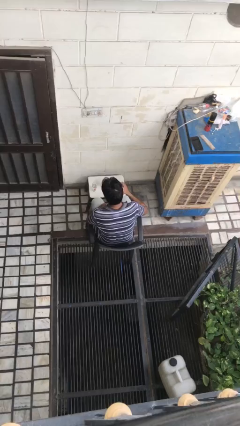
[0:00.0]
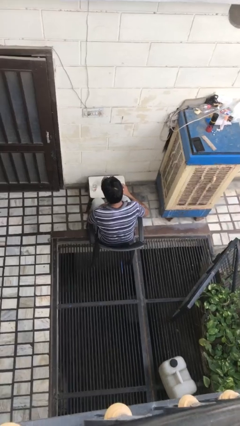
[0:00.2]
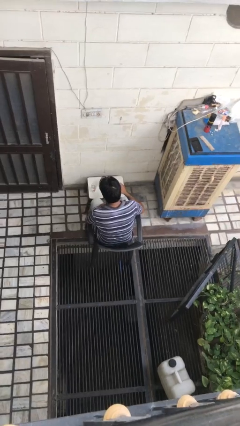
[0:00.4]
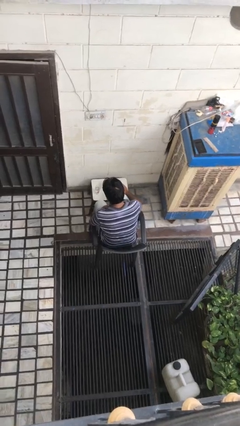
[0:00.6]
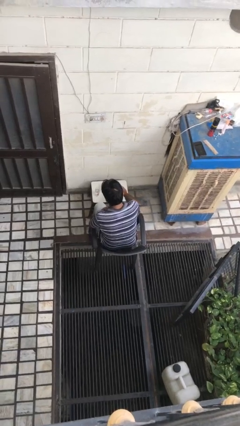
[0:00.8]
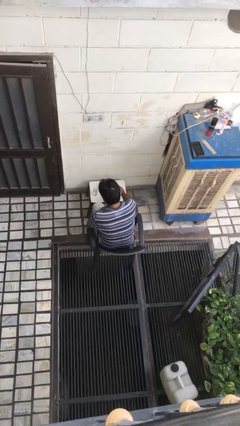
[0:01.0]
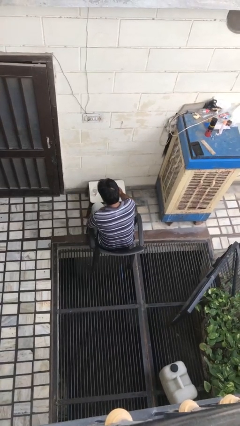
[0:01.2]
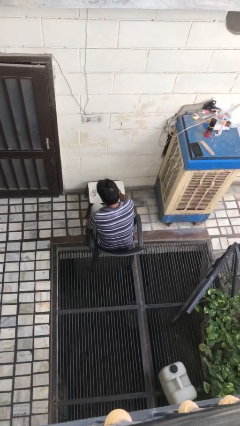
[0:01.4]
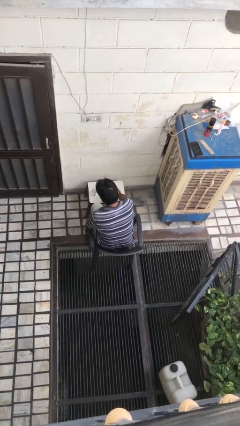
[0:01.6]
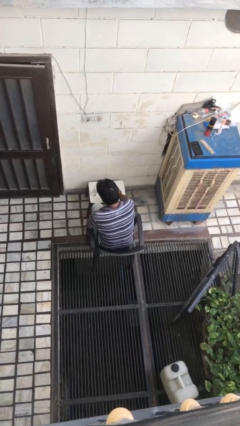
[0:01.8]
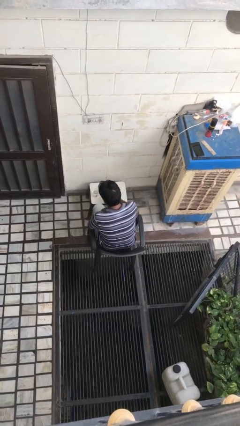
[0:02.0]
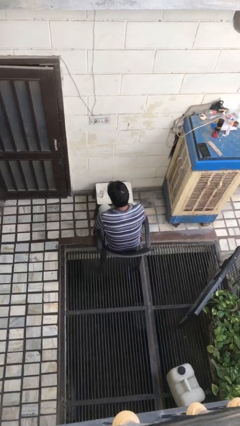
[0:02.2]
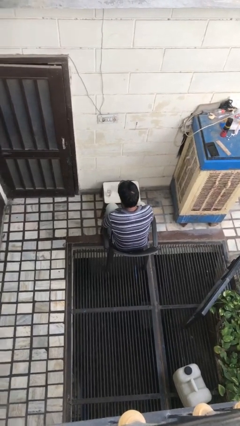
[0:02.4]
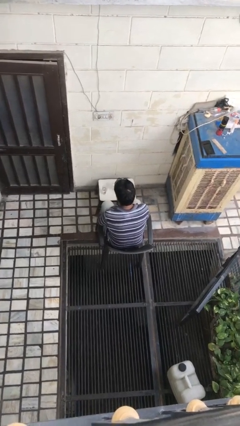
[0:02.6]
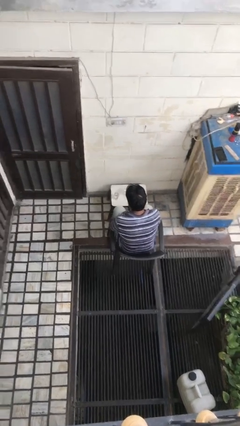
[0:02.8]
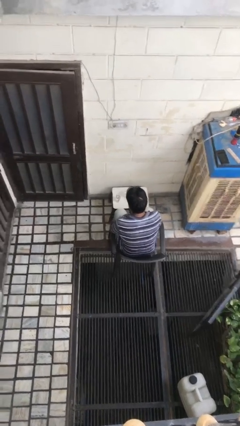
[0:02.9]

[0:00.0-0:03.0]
person puts down object on table

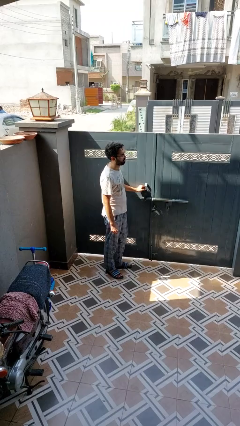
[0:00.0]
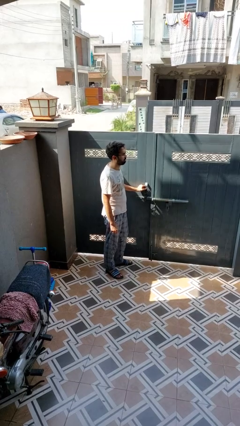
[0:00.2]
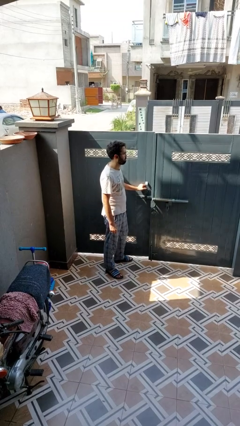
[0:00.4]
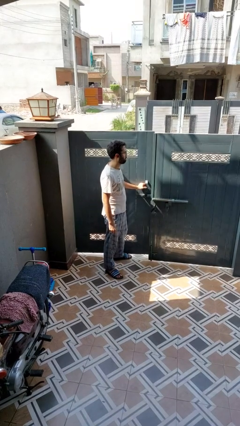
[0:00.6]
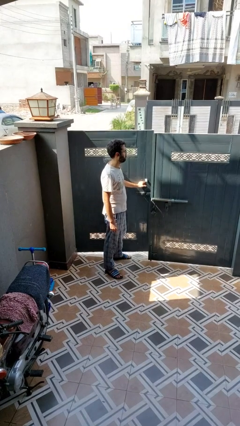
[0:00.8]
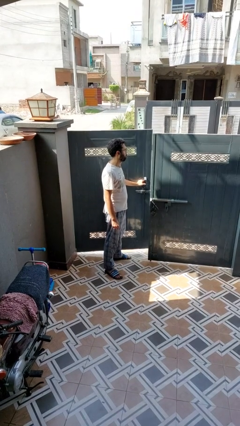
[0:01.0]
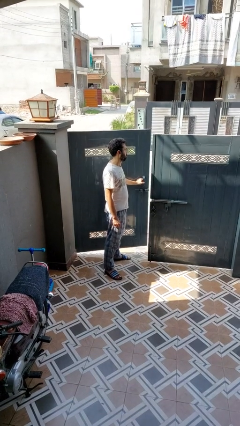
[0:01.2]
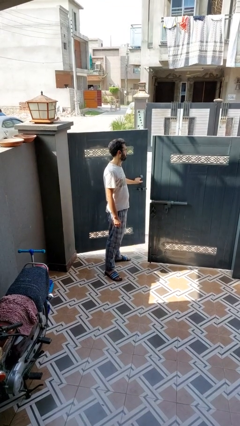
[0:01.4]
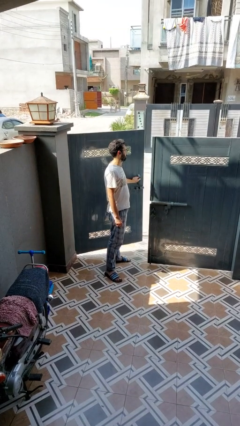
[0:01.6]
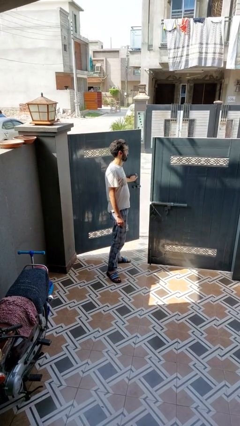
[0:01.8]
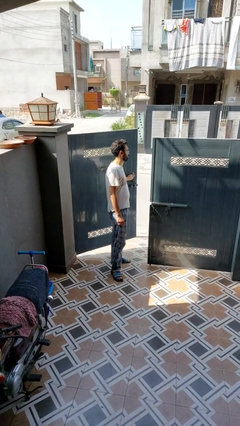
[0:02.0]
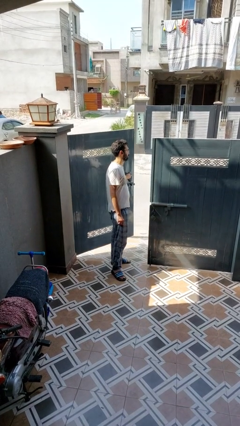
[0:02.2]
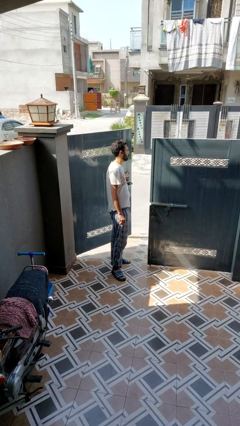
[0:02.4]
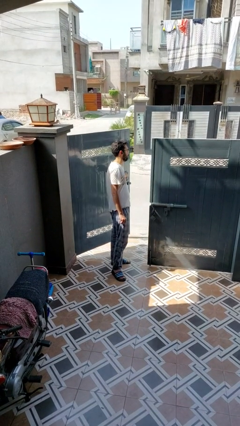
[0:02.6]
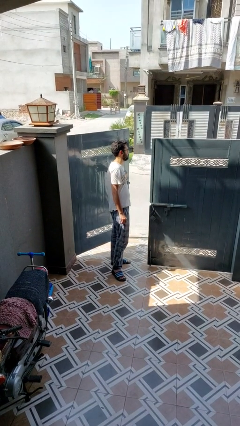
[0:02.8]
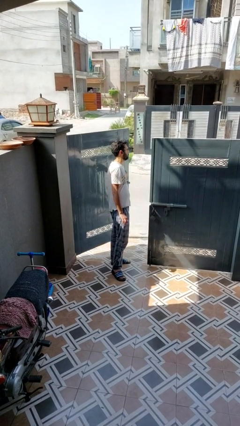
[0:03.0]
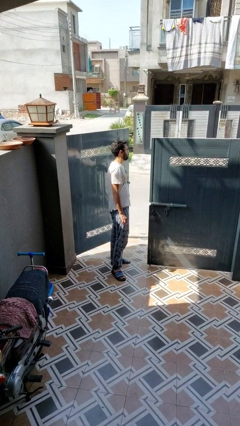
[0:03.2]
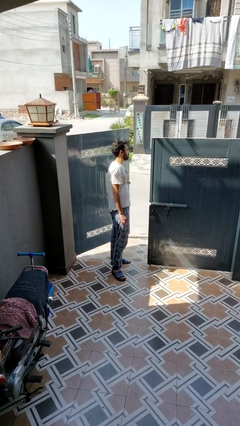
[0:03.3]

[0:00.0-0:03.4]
person opens gate

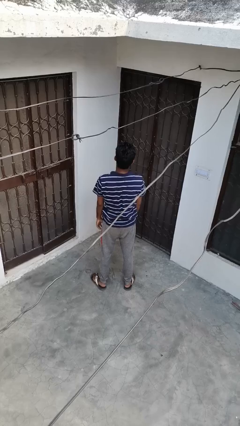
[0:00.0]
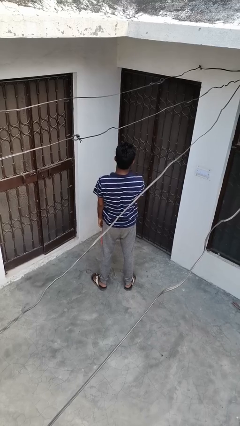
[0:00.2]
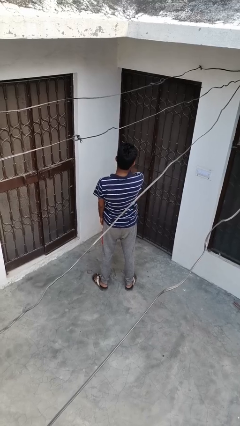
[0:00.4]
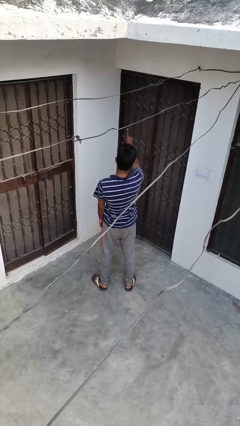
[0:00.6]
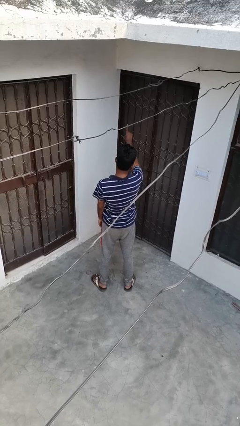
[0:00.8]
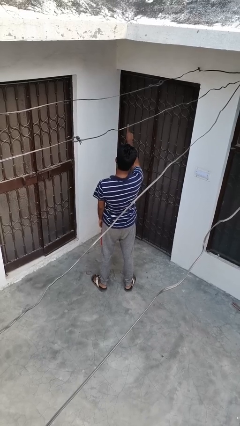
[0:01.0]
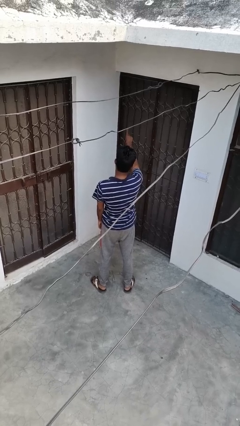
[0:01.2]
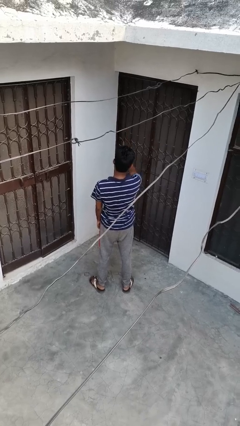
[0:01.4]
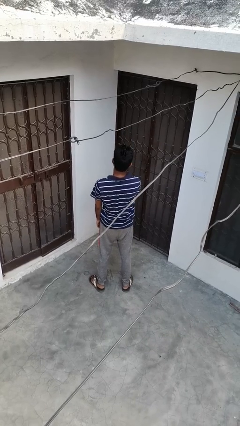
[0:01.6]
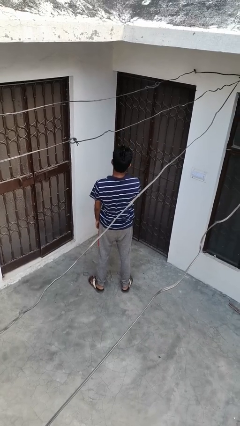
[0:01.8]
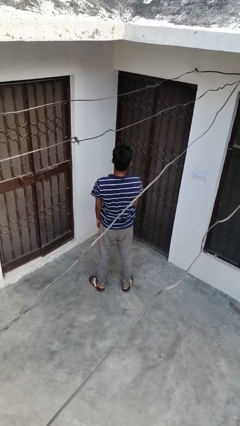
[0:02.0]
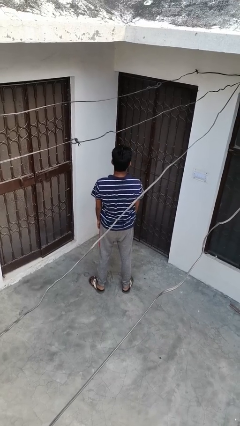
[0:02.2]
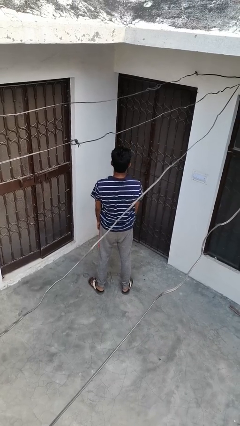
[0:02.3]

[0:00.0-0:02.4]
person gestures number one

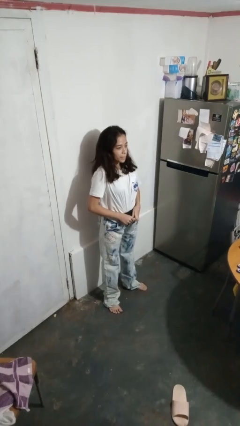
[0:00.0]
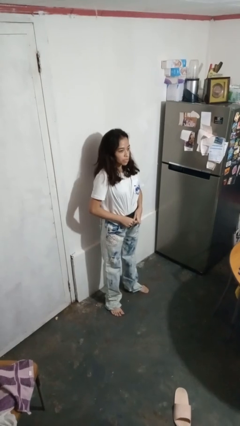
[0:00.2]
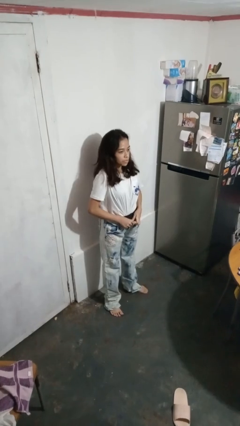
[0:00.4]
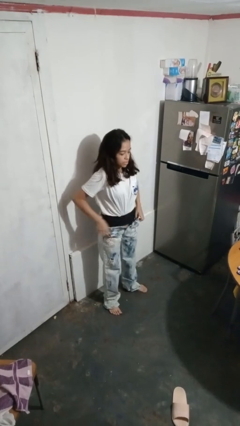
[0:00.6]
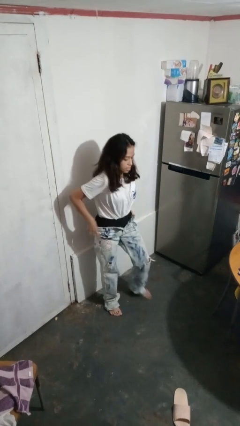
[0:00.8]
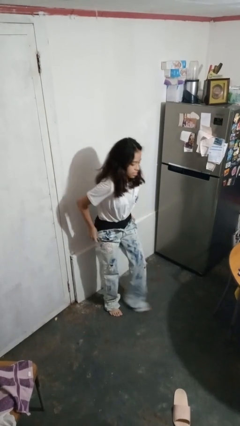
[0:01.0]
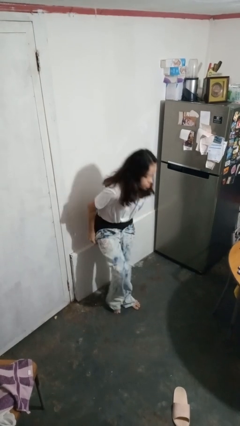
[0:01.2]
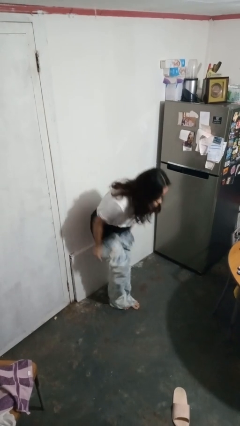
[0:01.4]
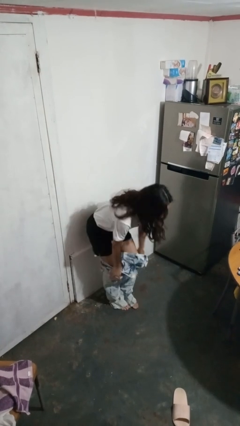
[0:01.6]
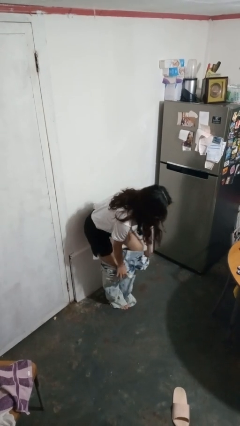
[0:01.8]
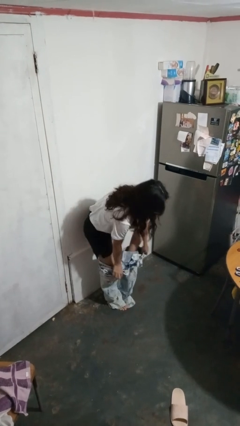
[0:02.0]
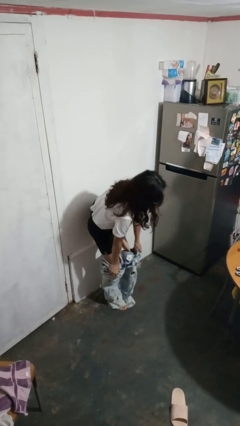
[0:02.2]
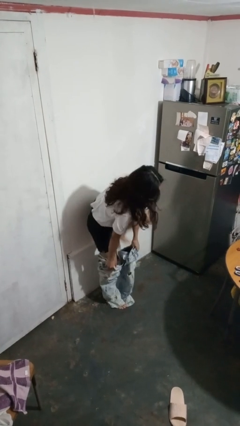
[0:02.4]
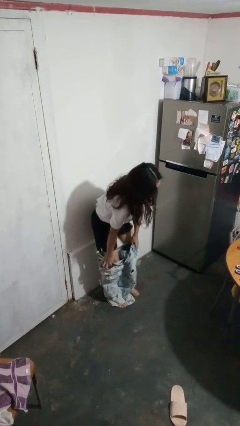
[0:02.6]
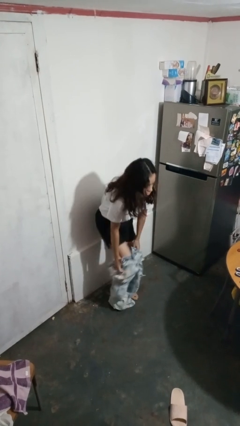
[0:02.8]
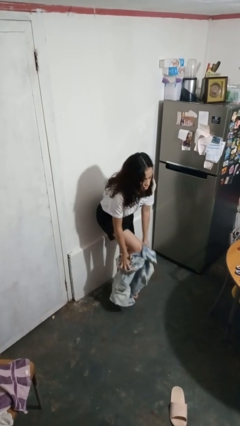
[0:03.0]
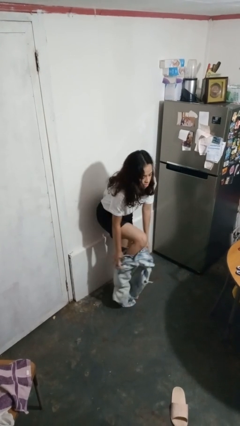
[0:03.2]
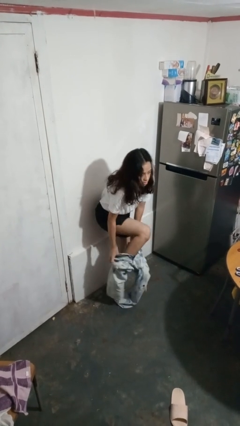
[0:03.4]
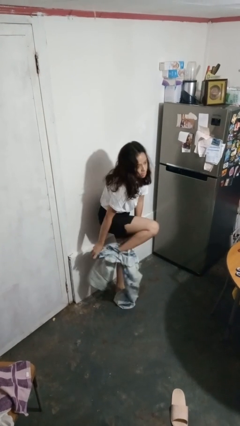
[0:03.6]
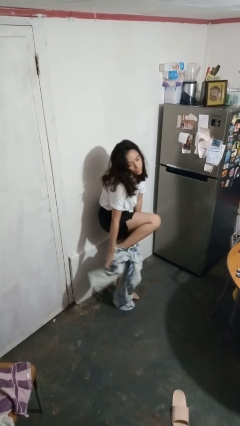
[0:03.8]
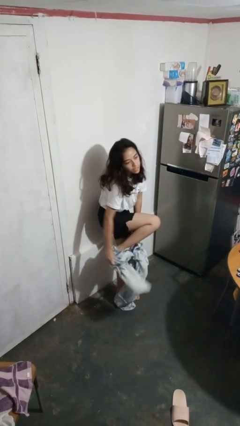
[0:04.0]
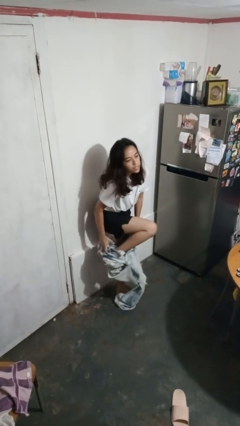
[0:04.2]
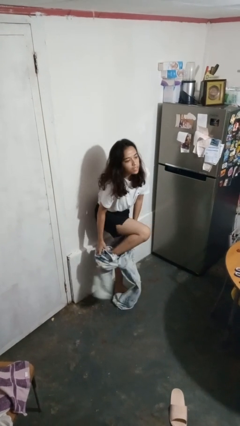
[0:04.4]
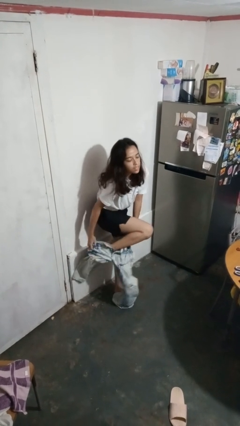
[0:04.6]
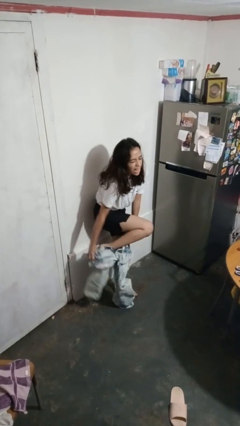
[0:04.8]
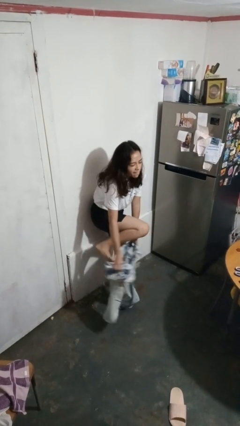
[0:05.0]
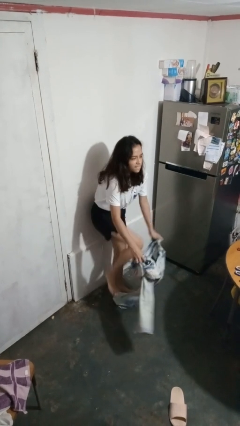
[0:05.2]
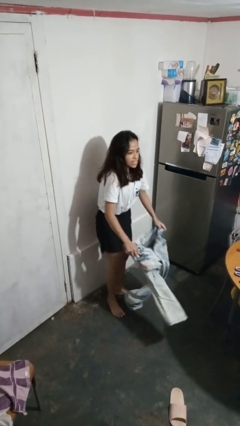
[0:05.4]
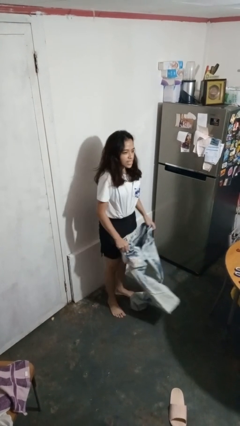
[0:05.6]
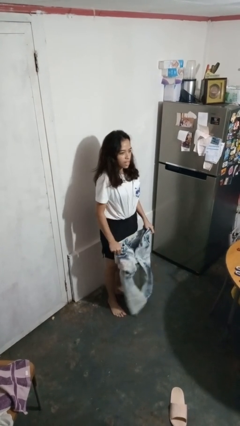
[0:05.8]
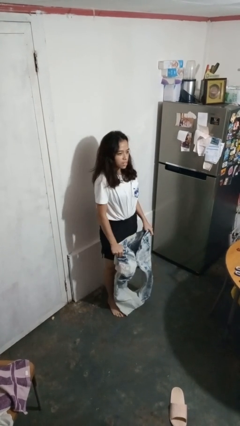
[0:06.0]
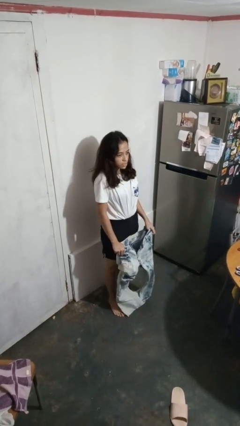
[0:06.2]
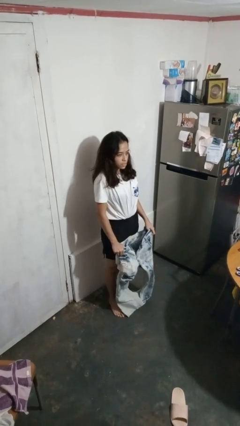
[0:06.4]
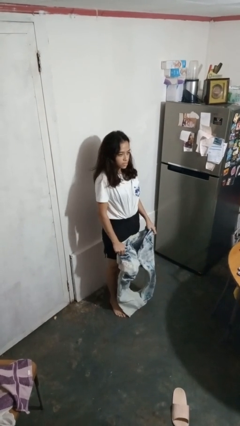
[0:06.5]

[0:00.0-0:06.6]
person takes off pants

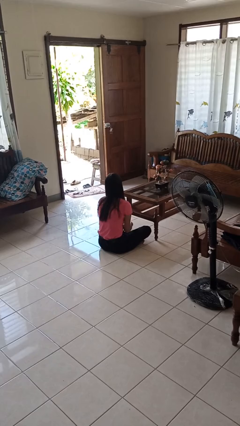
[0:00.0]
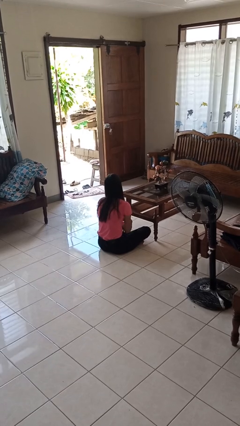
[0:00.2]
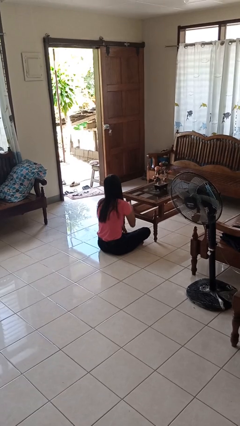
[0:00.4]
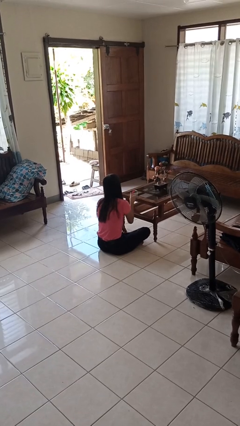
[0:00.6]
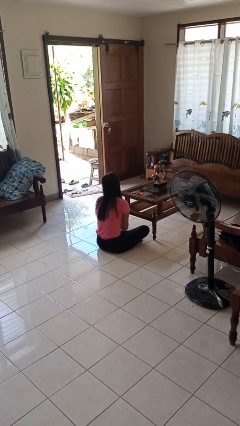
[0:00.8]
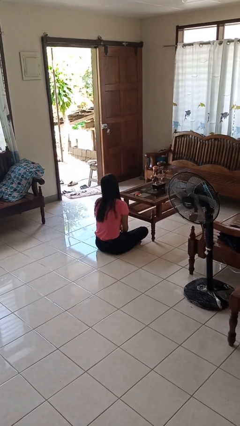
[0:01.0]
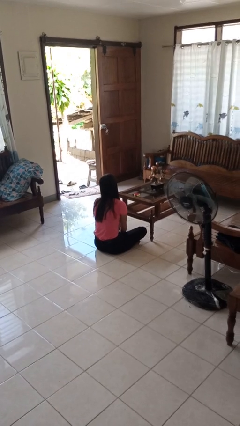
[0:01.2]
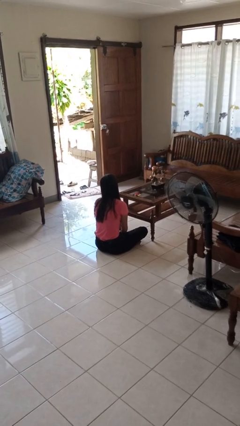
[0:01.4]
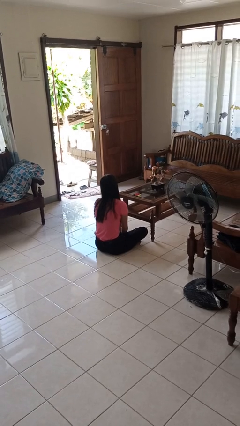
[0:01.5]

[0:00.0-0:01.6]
person throws object on table

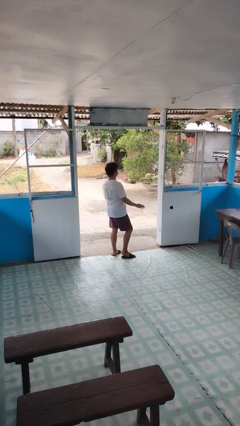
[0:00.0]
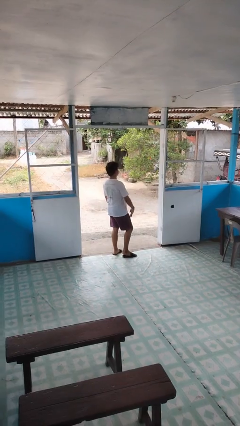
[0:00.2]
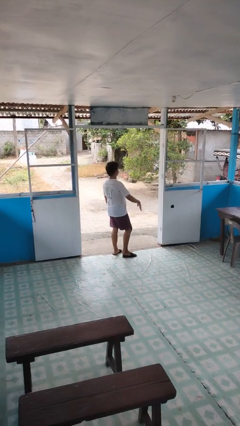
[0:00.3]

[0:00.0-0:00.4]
person slaps hands on thighs
